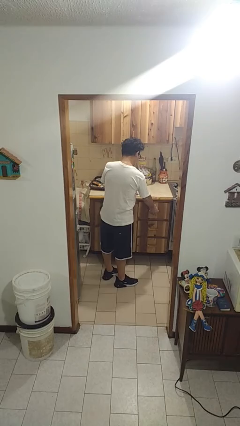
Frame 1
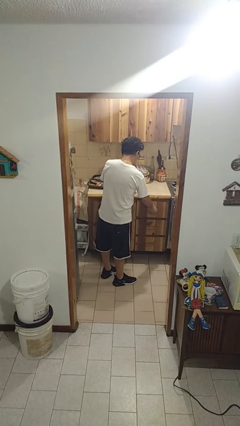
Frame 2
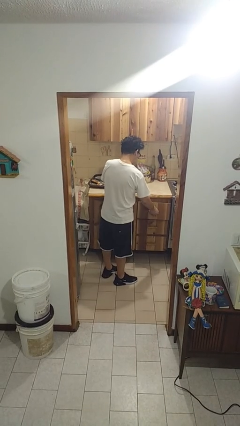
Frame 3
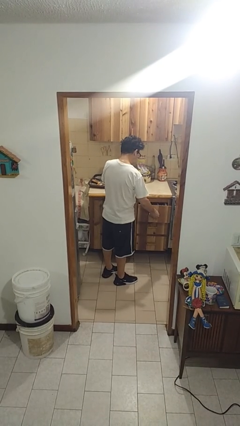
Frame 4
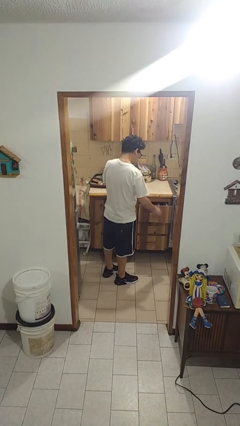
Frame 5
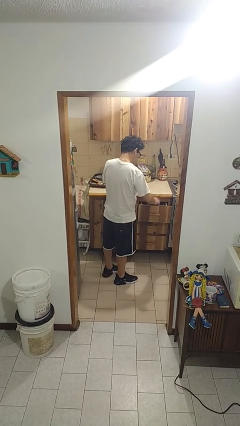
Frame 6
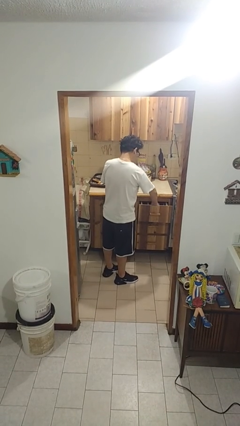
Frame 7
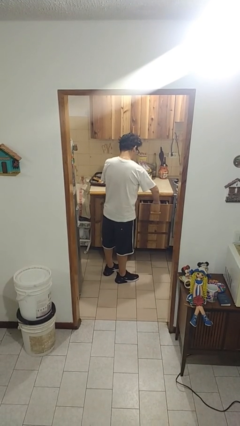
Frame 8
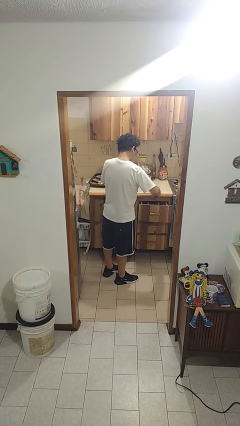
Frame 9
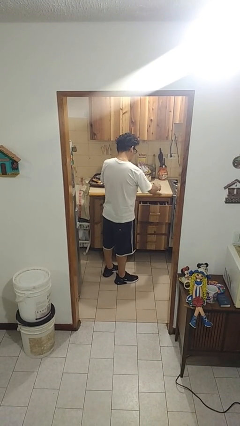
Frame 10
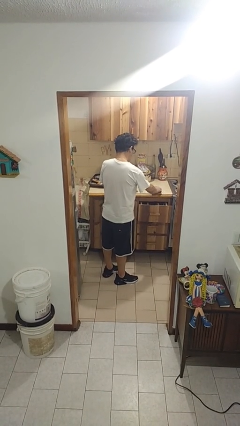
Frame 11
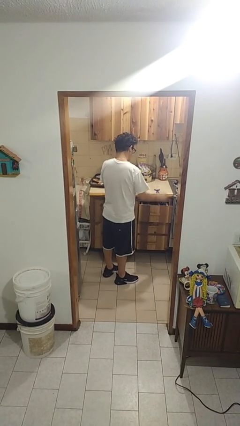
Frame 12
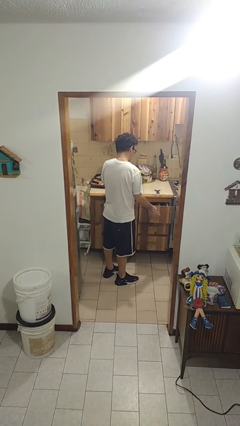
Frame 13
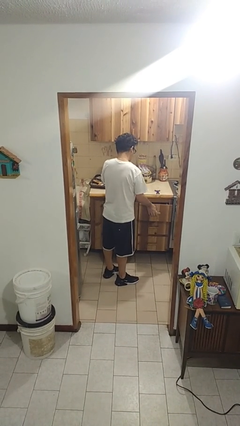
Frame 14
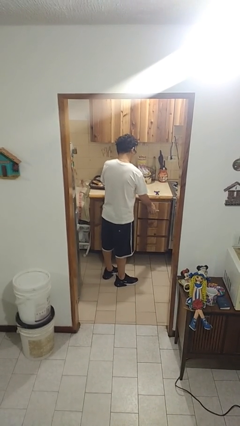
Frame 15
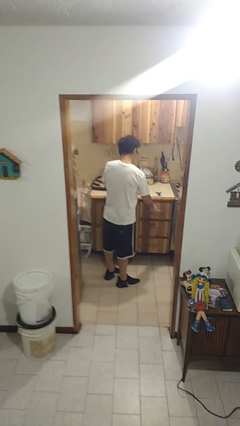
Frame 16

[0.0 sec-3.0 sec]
person takes object from kitchen drawer

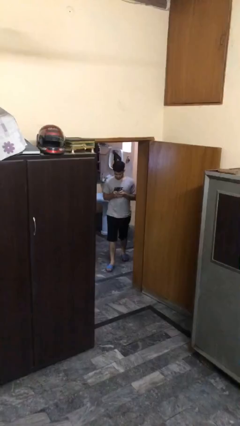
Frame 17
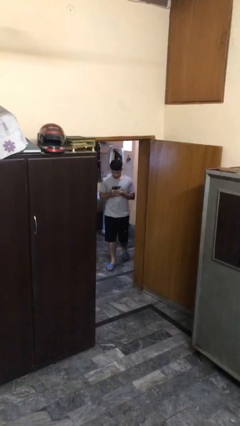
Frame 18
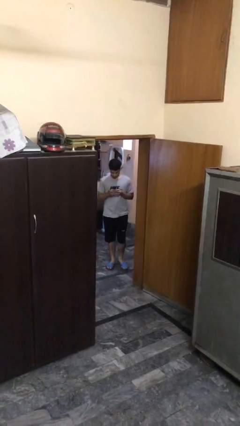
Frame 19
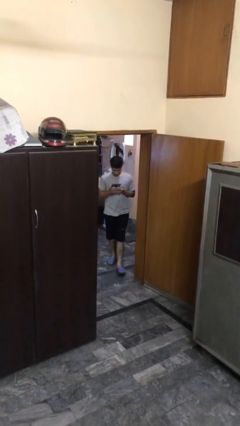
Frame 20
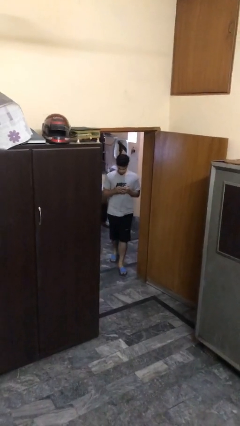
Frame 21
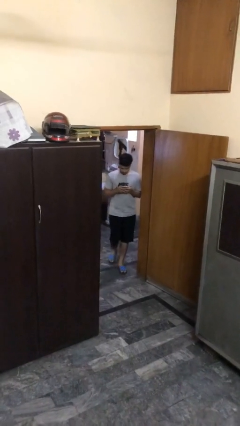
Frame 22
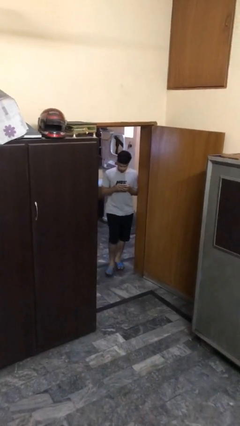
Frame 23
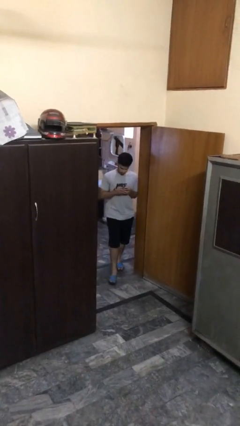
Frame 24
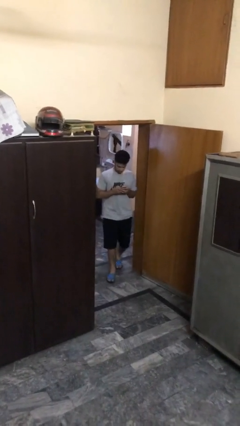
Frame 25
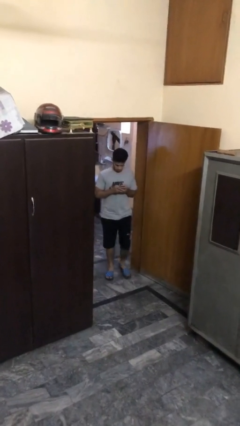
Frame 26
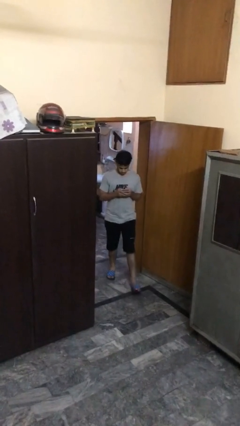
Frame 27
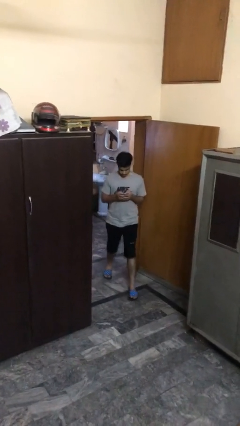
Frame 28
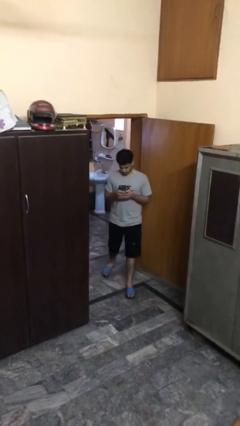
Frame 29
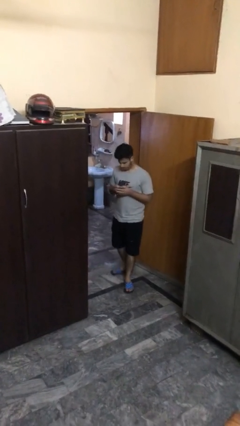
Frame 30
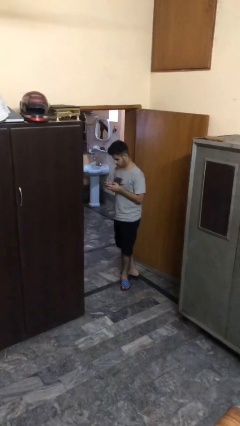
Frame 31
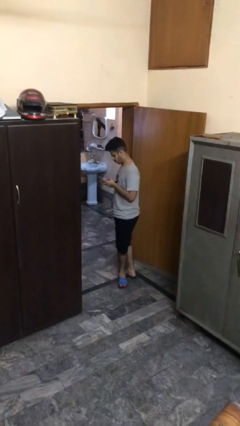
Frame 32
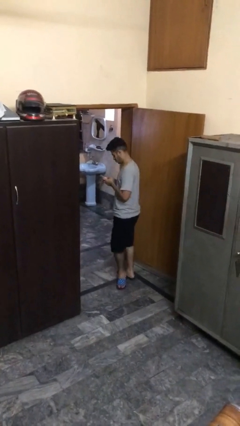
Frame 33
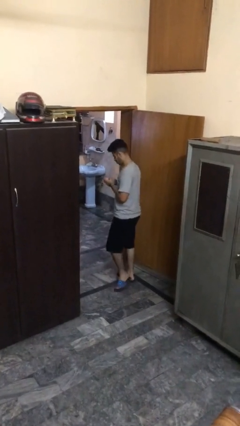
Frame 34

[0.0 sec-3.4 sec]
person enters scene through structure

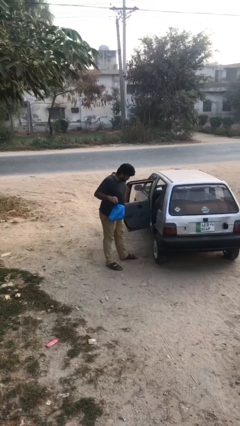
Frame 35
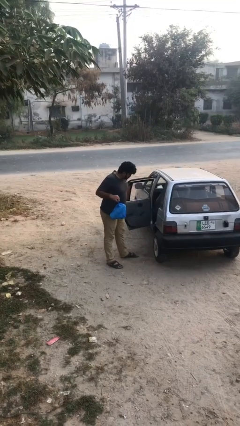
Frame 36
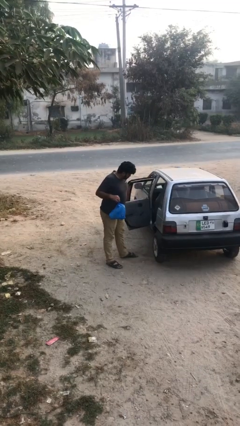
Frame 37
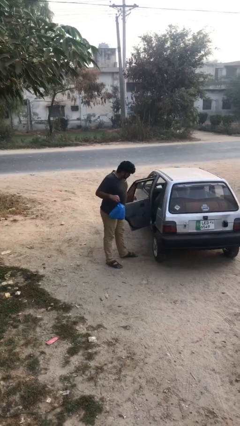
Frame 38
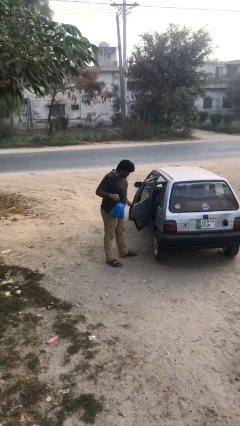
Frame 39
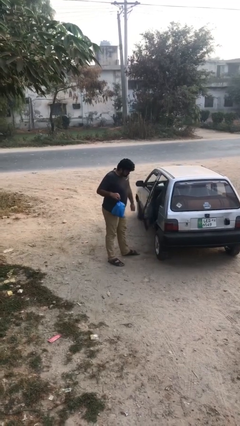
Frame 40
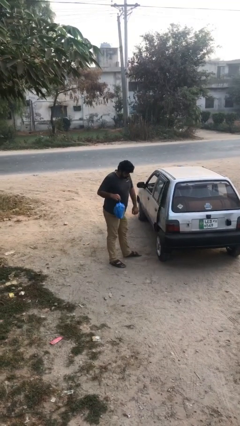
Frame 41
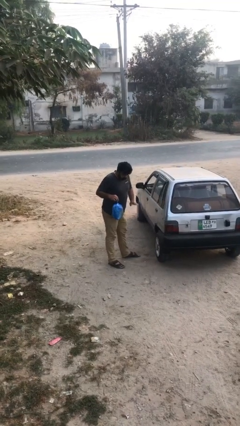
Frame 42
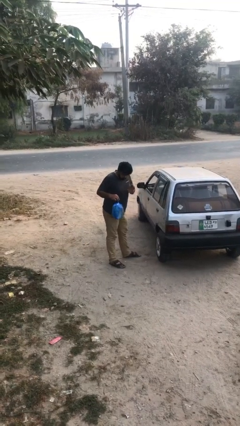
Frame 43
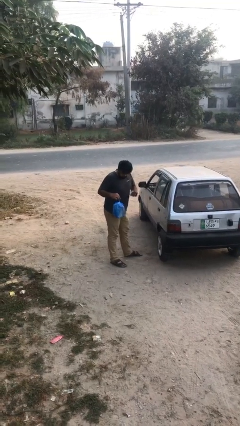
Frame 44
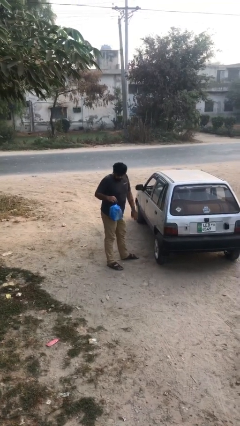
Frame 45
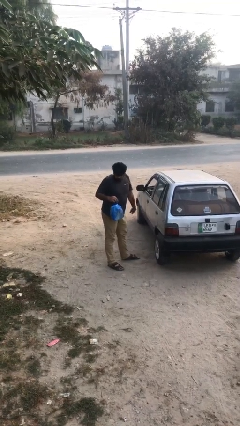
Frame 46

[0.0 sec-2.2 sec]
person closes car door

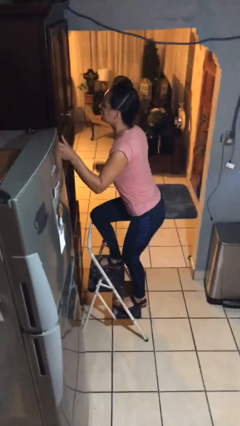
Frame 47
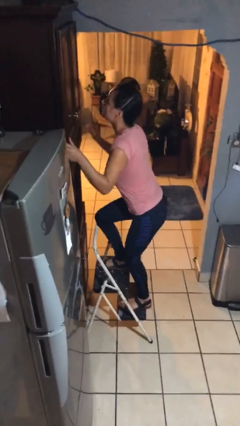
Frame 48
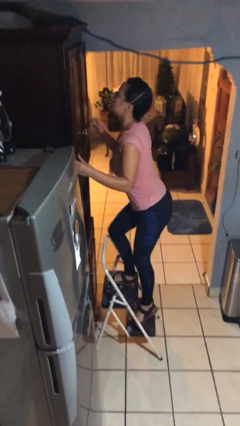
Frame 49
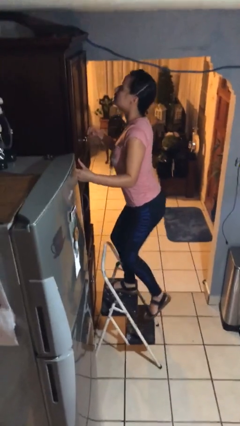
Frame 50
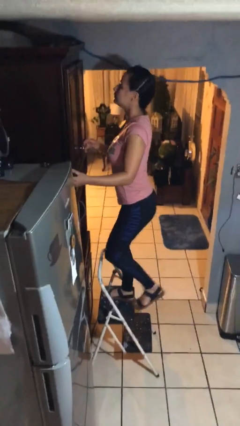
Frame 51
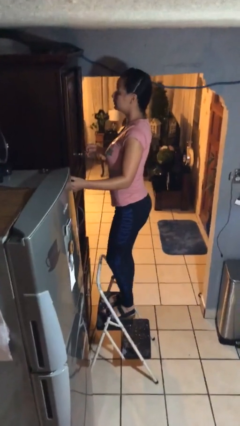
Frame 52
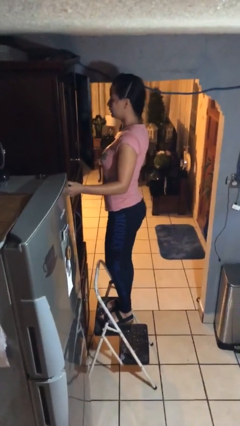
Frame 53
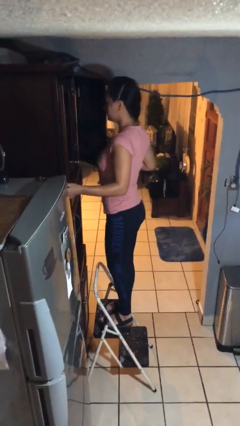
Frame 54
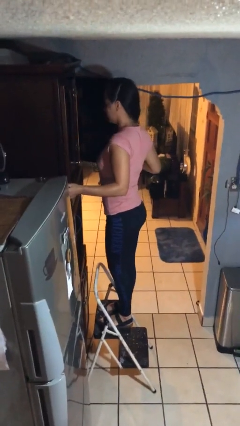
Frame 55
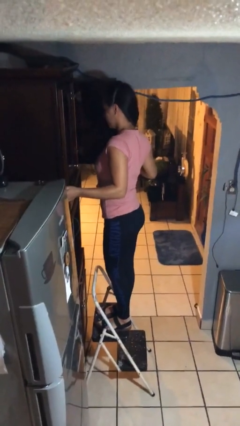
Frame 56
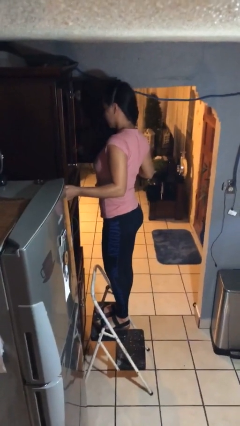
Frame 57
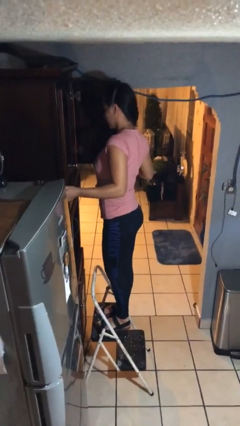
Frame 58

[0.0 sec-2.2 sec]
person climbs up ladder

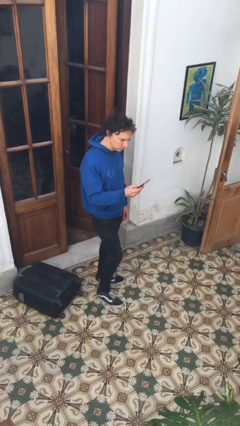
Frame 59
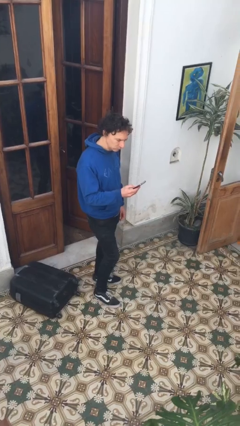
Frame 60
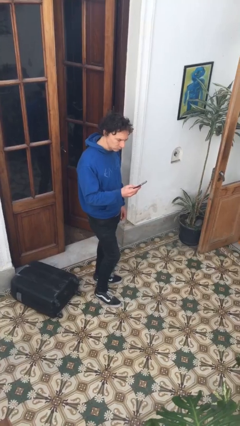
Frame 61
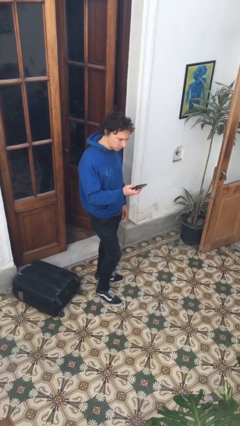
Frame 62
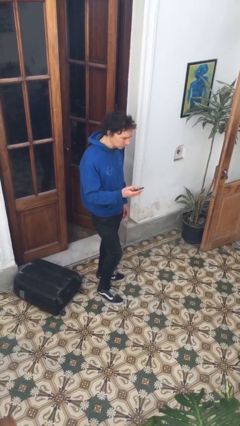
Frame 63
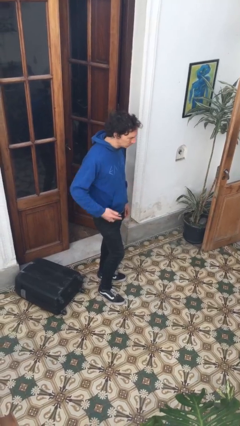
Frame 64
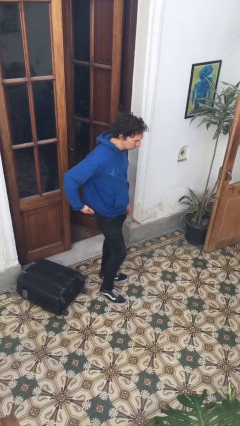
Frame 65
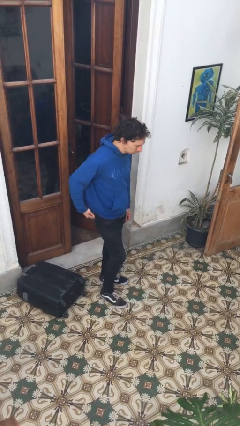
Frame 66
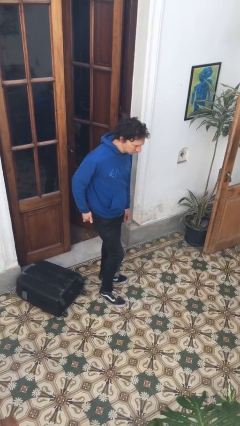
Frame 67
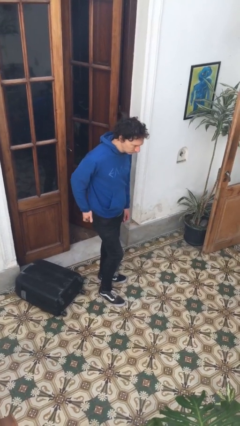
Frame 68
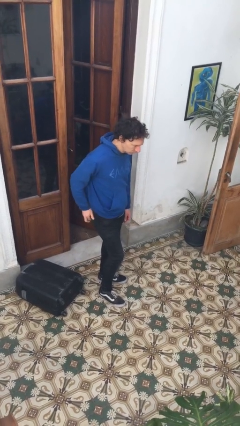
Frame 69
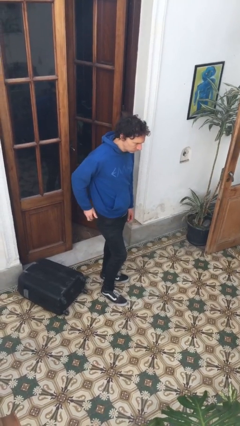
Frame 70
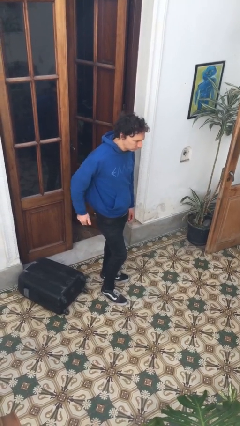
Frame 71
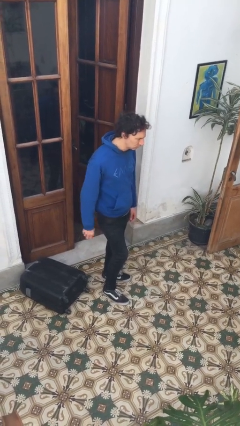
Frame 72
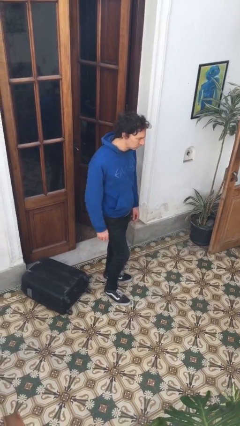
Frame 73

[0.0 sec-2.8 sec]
person puts phone into pocket

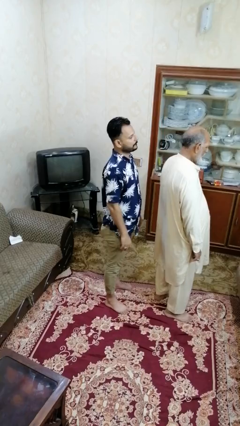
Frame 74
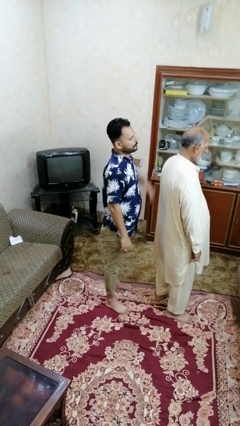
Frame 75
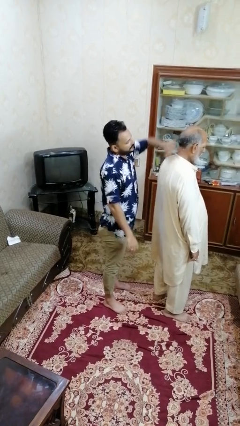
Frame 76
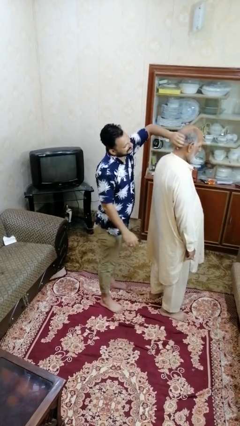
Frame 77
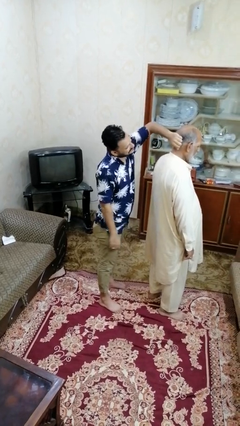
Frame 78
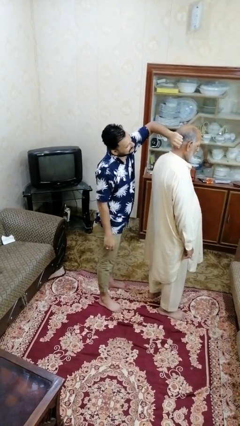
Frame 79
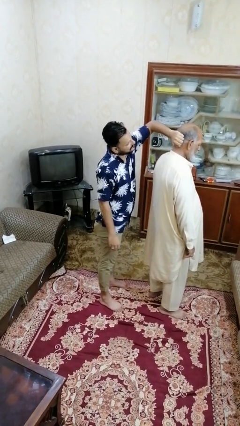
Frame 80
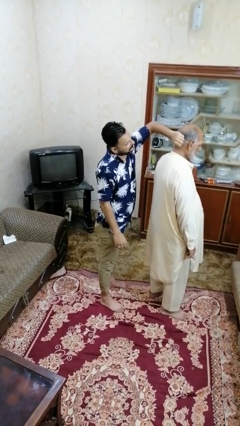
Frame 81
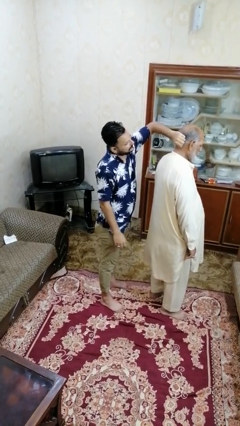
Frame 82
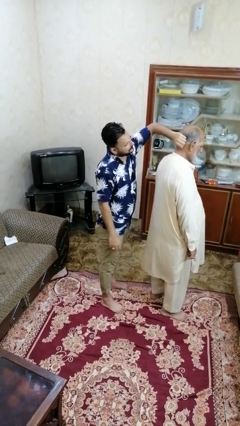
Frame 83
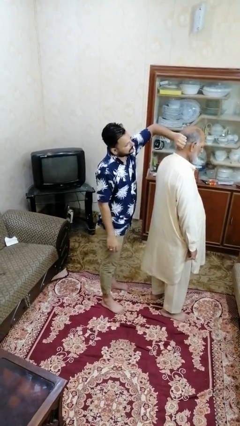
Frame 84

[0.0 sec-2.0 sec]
person grabs person by hair

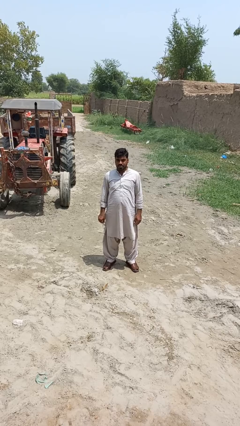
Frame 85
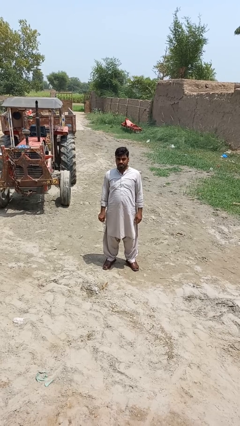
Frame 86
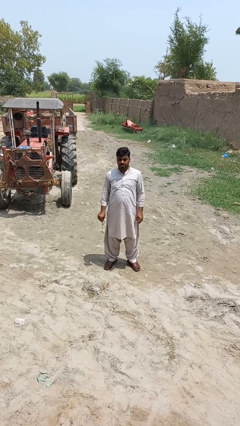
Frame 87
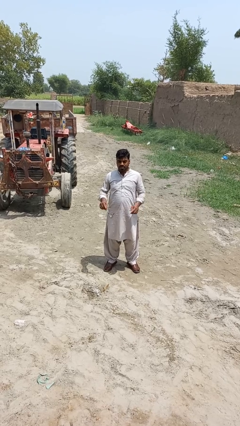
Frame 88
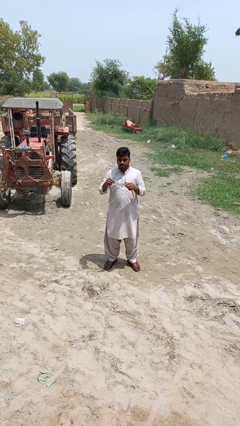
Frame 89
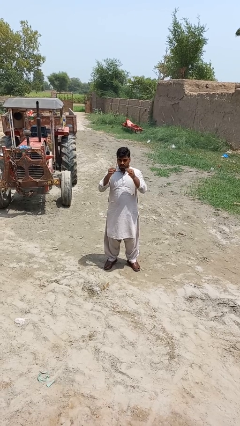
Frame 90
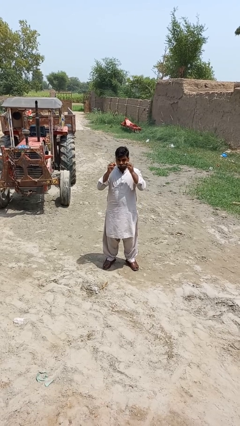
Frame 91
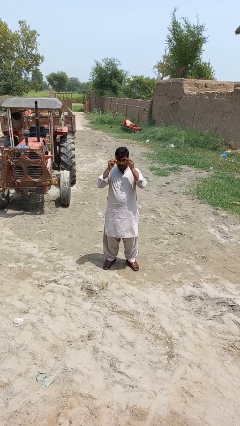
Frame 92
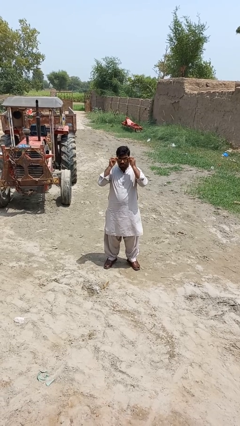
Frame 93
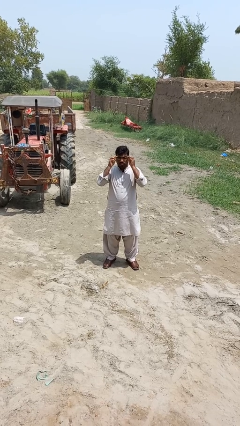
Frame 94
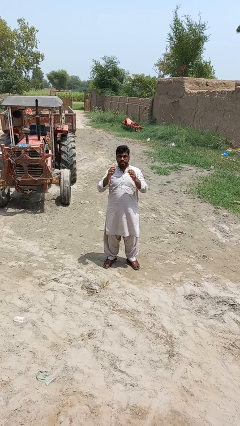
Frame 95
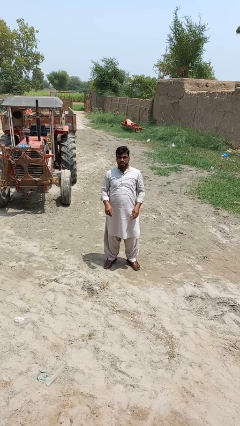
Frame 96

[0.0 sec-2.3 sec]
person puts on glasses
